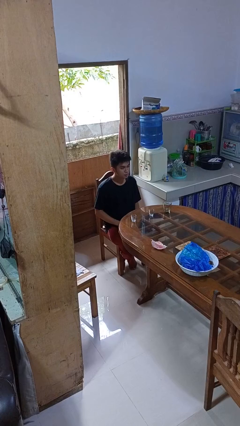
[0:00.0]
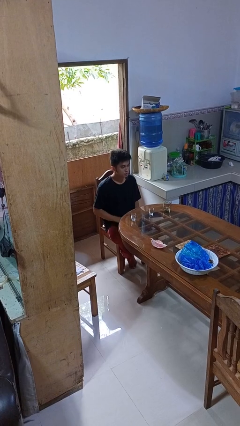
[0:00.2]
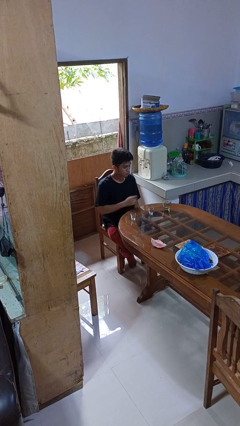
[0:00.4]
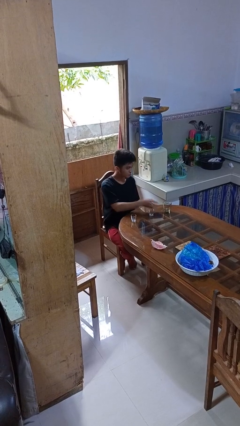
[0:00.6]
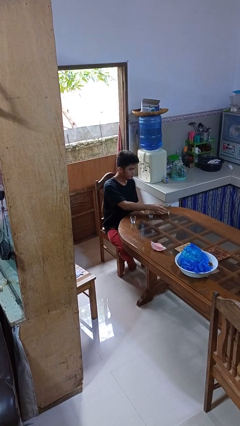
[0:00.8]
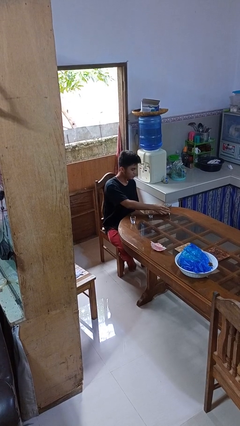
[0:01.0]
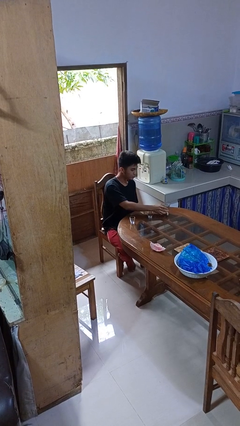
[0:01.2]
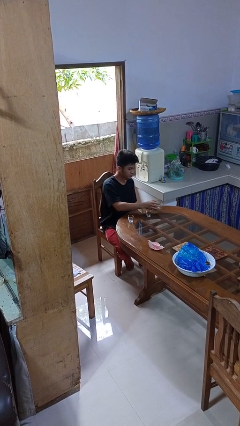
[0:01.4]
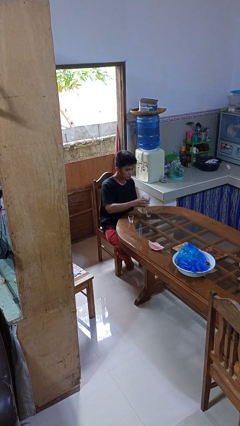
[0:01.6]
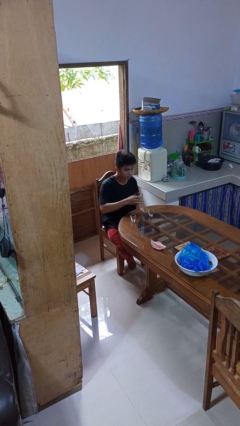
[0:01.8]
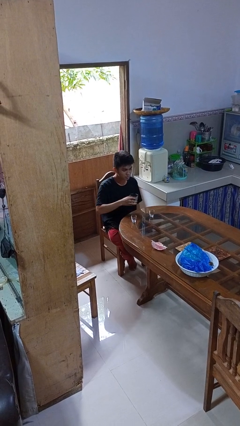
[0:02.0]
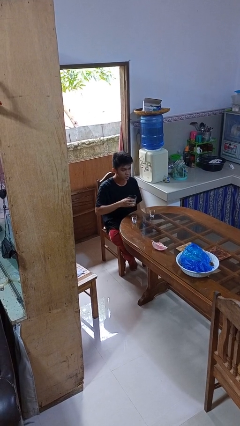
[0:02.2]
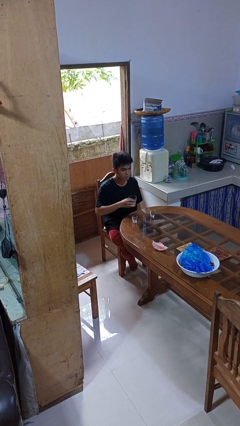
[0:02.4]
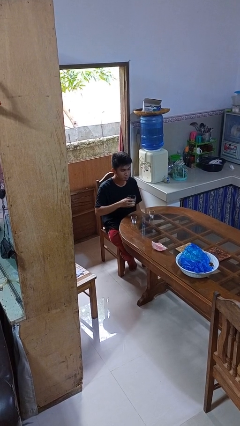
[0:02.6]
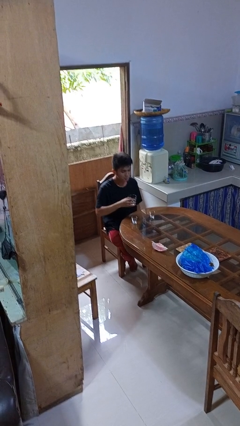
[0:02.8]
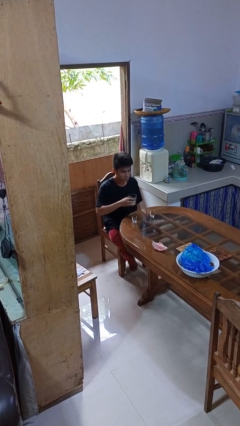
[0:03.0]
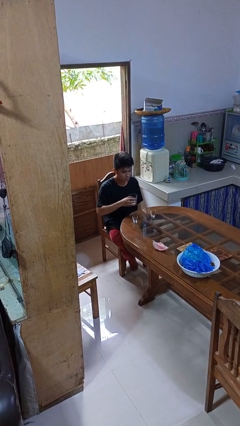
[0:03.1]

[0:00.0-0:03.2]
person picks up object from table

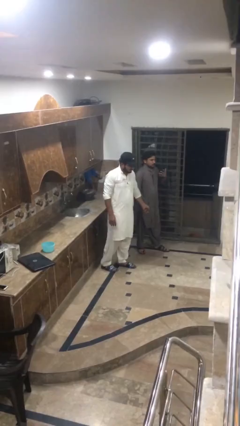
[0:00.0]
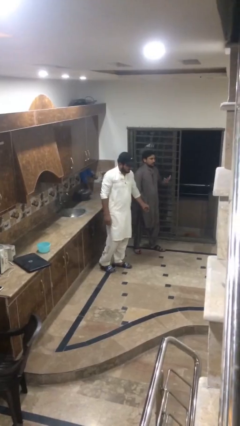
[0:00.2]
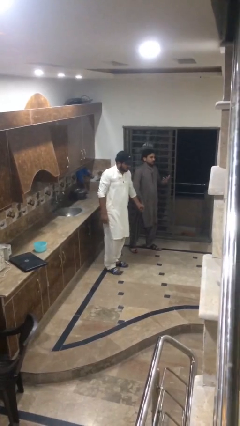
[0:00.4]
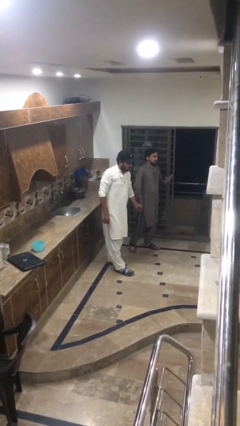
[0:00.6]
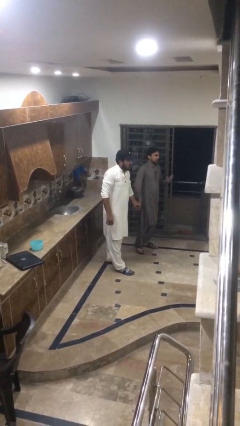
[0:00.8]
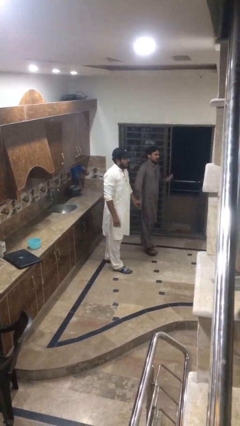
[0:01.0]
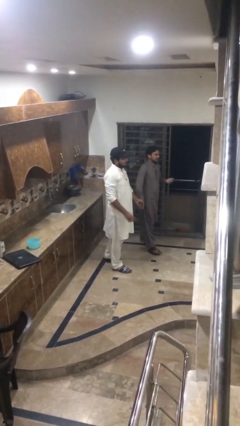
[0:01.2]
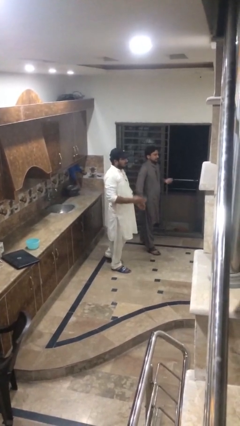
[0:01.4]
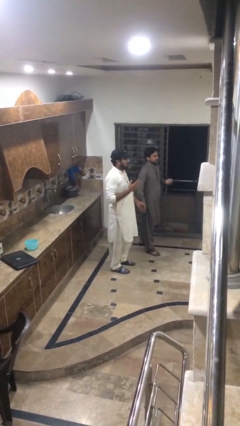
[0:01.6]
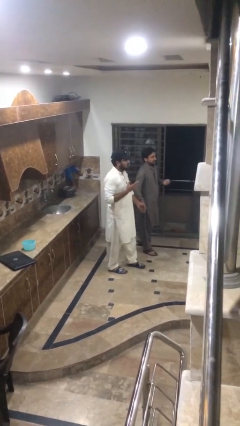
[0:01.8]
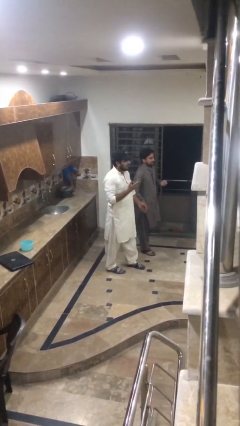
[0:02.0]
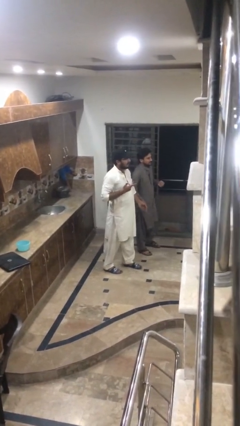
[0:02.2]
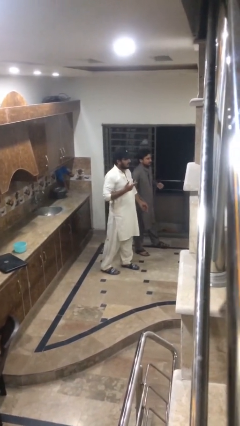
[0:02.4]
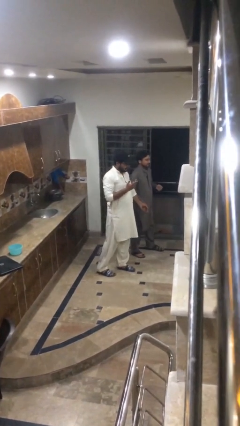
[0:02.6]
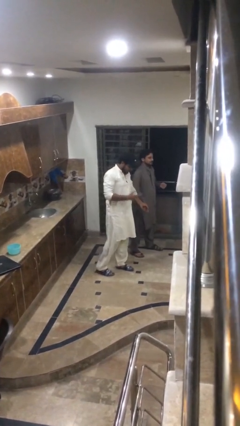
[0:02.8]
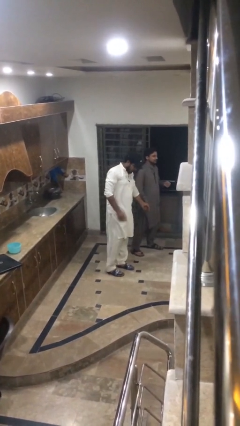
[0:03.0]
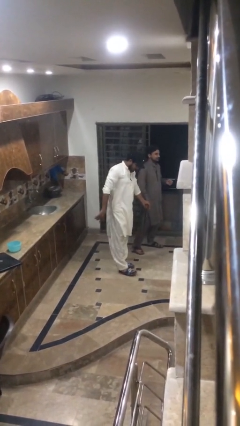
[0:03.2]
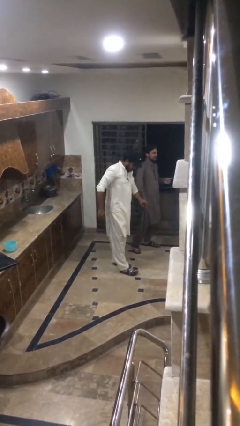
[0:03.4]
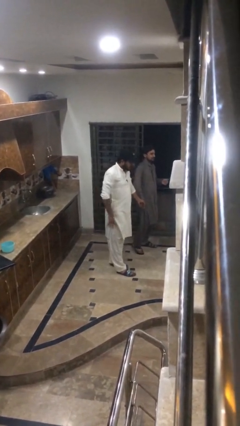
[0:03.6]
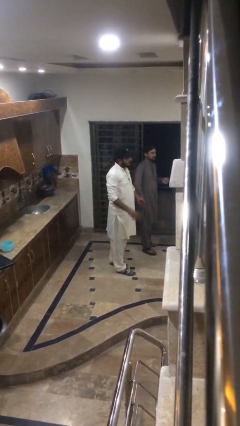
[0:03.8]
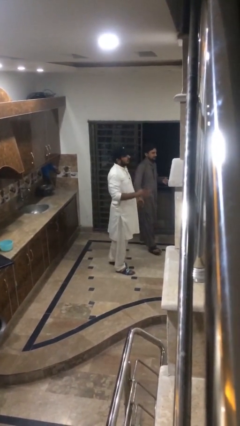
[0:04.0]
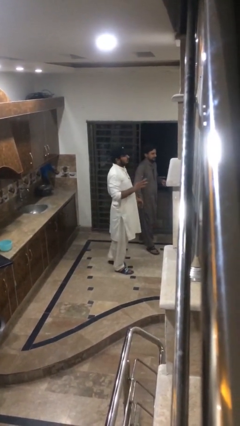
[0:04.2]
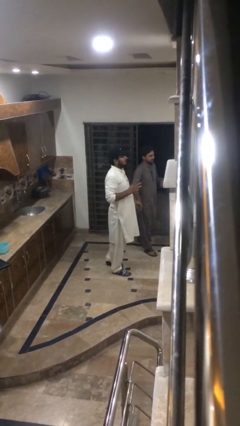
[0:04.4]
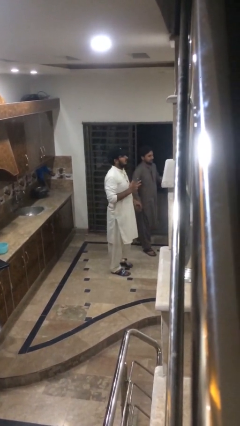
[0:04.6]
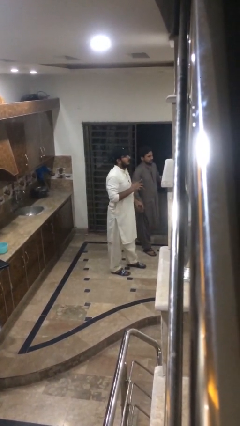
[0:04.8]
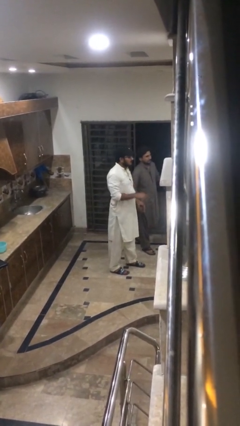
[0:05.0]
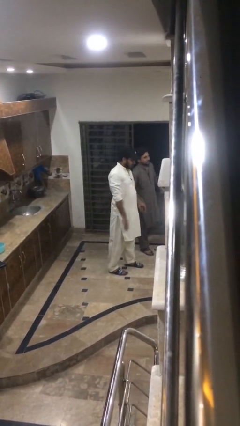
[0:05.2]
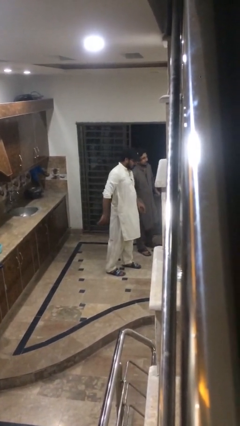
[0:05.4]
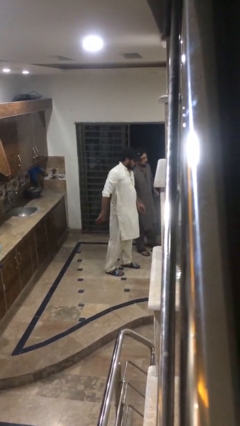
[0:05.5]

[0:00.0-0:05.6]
person holds hand

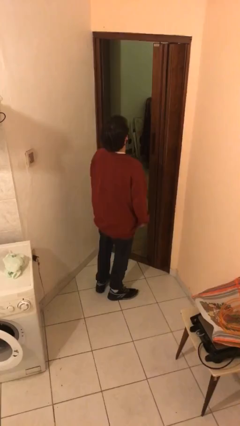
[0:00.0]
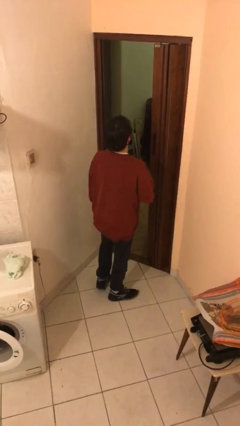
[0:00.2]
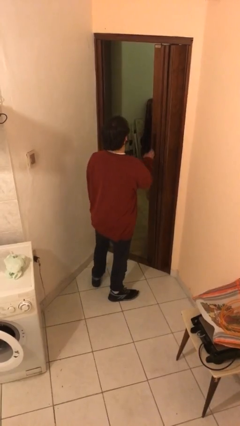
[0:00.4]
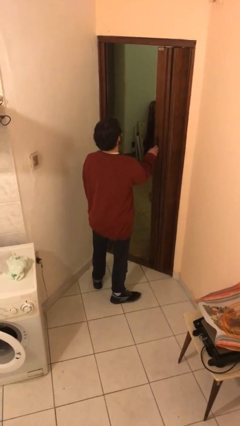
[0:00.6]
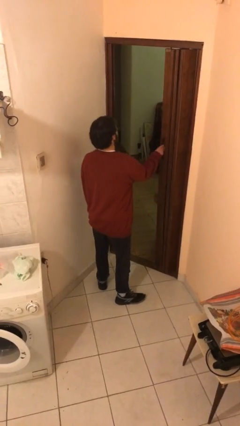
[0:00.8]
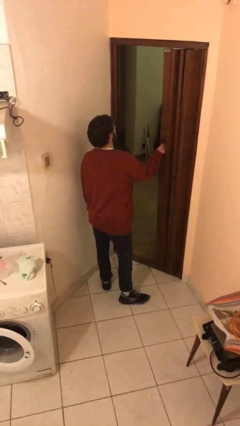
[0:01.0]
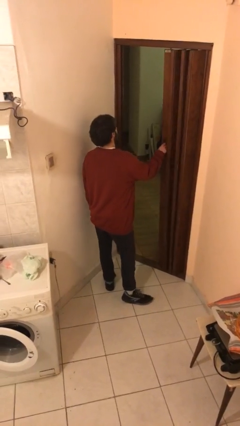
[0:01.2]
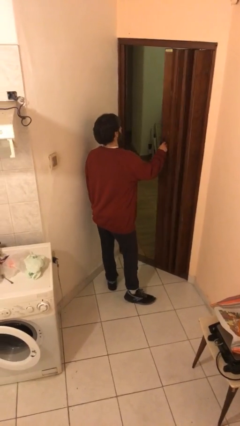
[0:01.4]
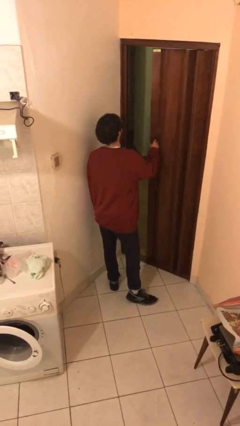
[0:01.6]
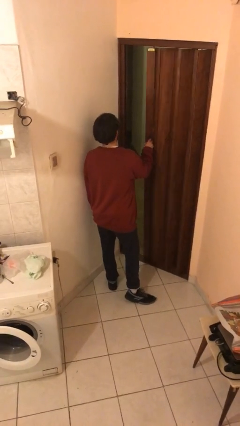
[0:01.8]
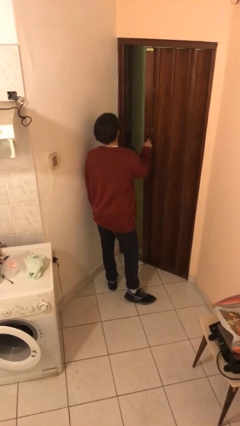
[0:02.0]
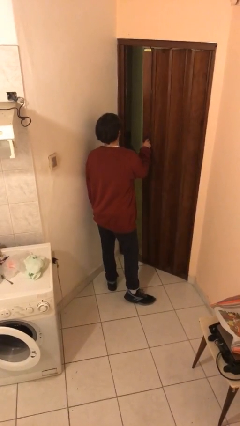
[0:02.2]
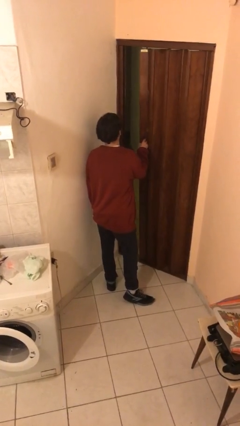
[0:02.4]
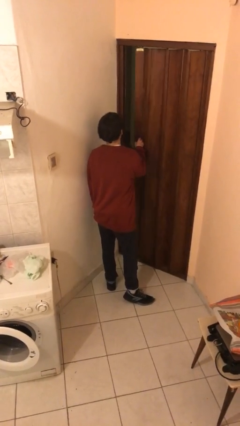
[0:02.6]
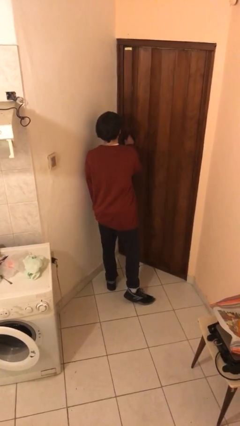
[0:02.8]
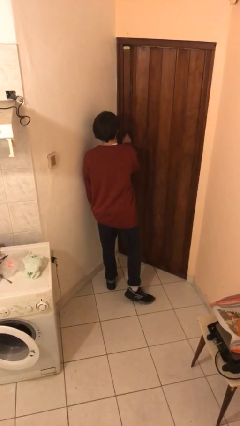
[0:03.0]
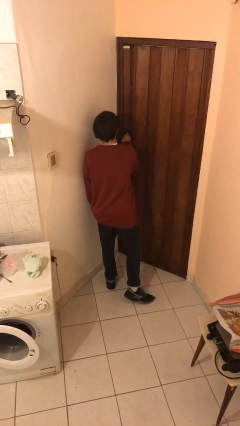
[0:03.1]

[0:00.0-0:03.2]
person closes sliding door

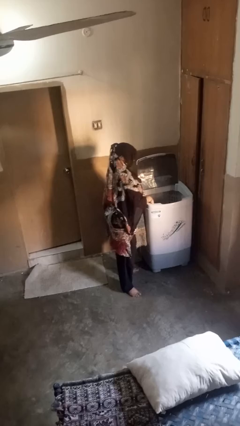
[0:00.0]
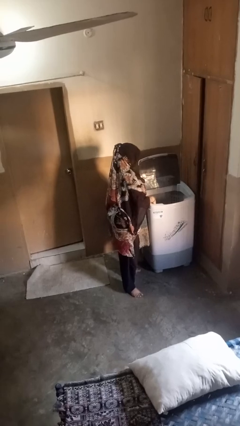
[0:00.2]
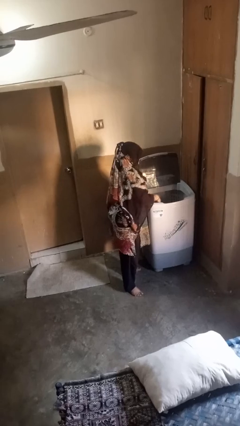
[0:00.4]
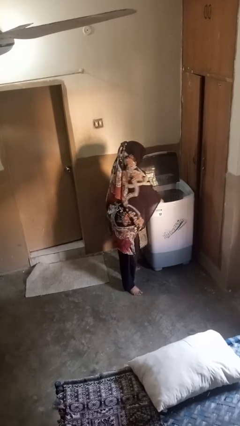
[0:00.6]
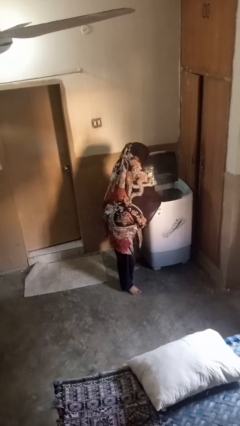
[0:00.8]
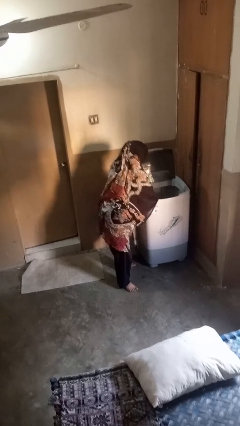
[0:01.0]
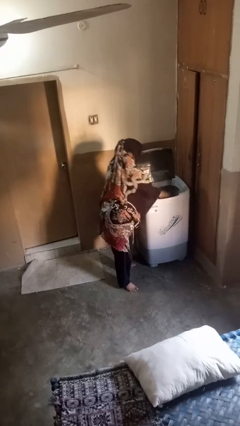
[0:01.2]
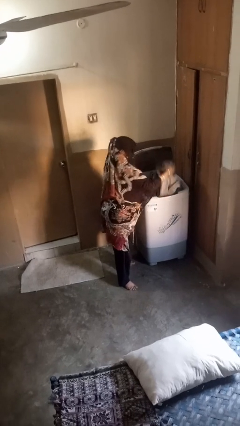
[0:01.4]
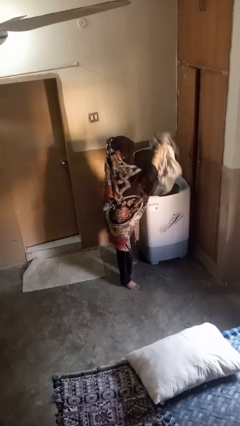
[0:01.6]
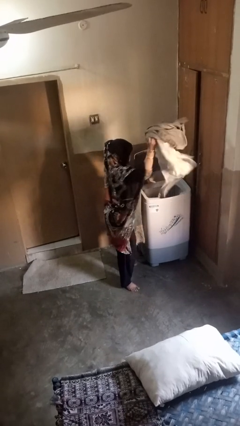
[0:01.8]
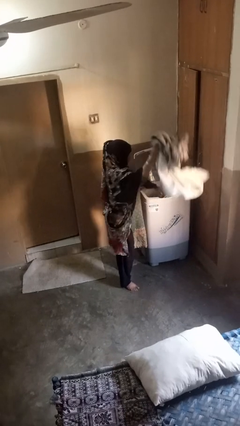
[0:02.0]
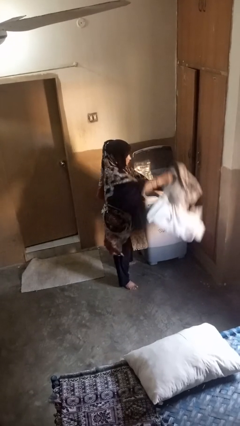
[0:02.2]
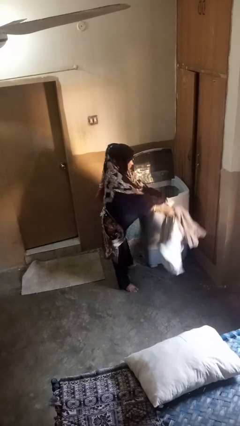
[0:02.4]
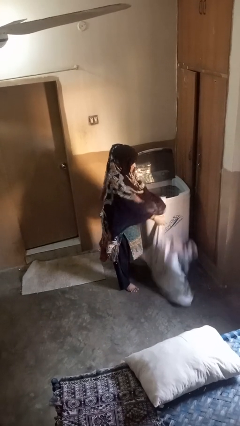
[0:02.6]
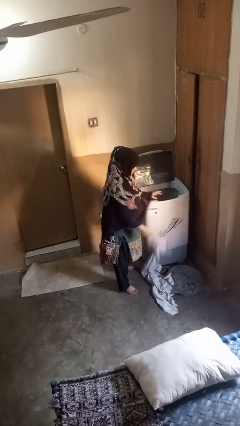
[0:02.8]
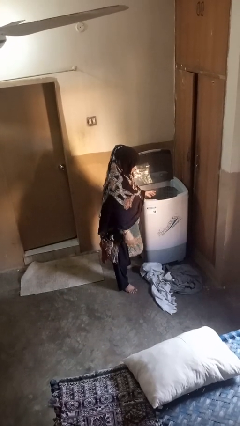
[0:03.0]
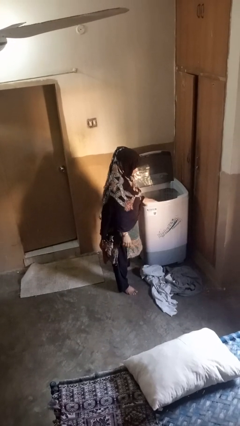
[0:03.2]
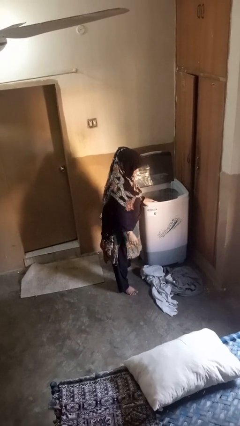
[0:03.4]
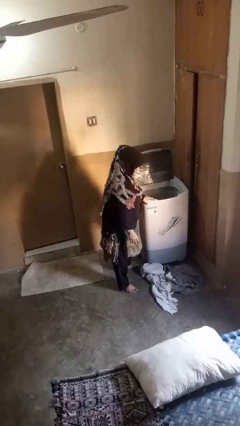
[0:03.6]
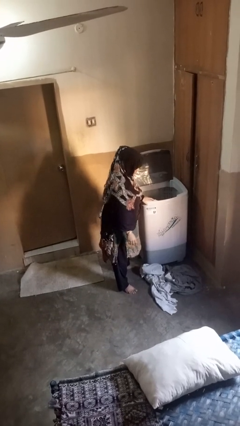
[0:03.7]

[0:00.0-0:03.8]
person unloads clotheswasher

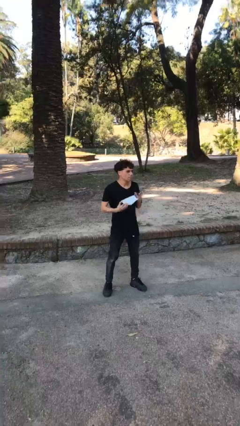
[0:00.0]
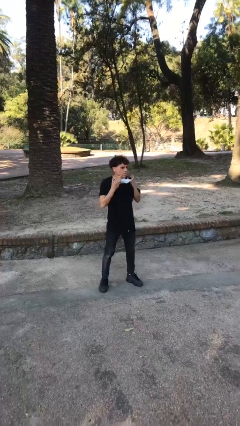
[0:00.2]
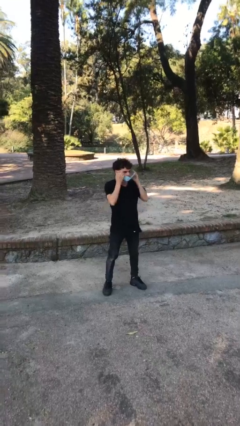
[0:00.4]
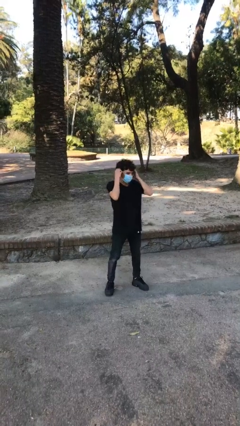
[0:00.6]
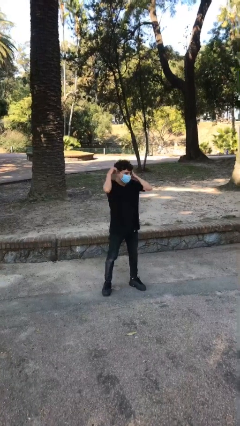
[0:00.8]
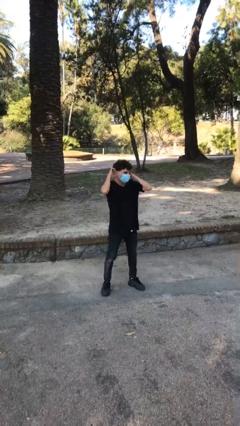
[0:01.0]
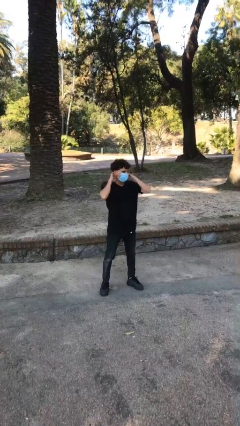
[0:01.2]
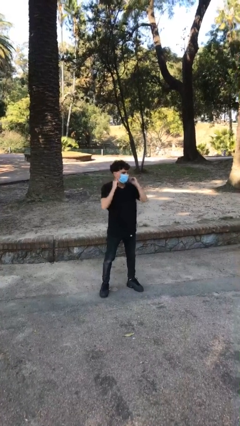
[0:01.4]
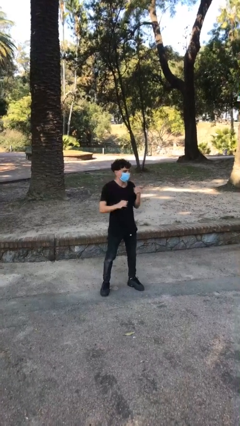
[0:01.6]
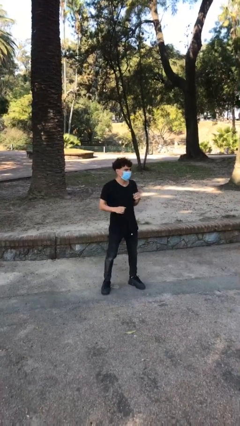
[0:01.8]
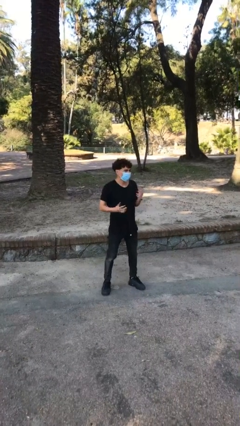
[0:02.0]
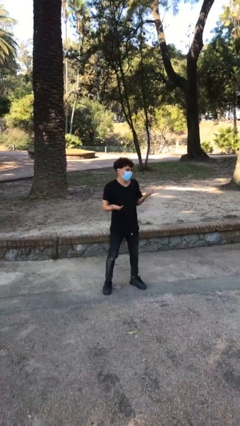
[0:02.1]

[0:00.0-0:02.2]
person puts on facemask
